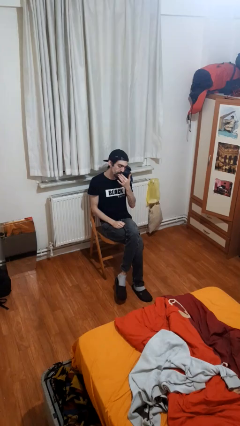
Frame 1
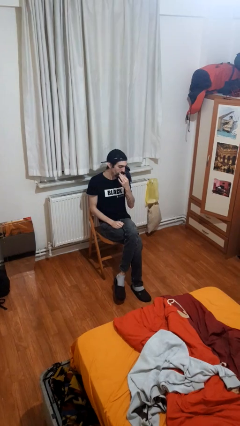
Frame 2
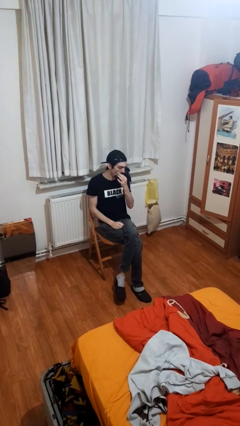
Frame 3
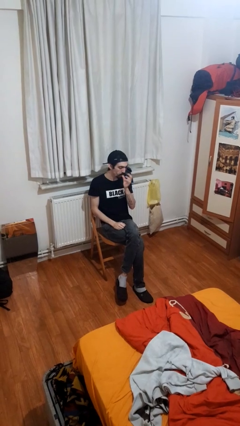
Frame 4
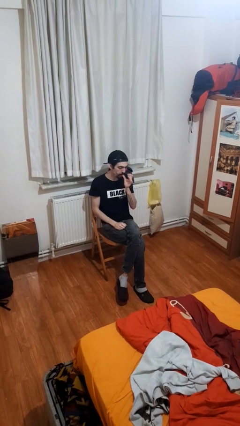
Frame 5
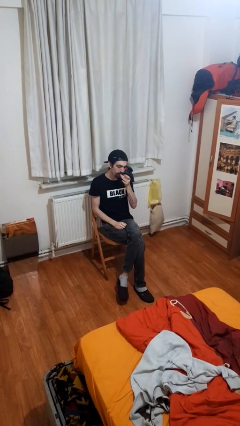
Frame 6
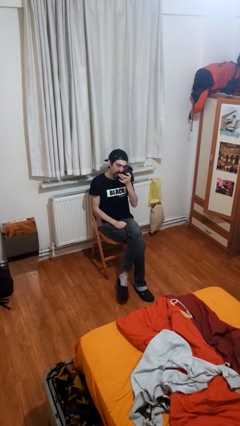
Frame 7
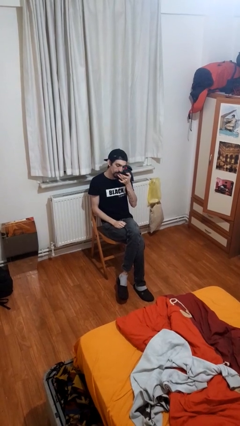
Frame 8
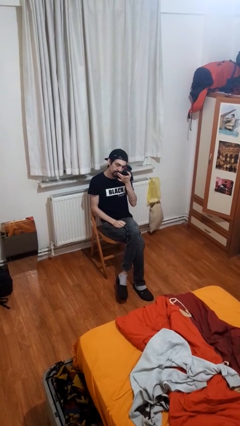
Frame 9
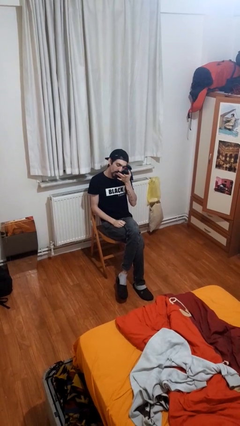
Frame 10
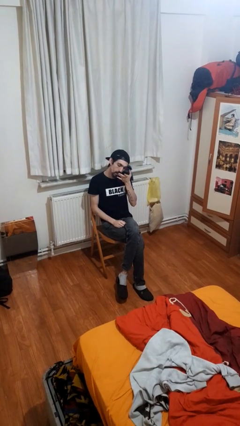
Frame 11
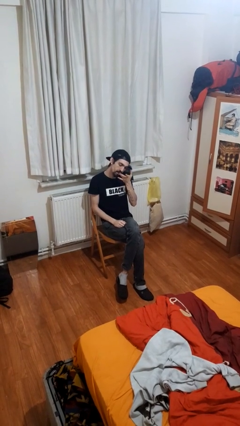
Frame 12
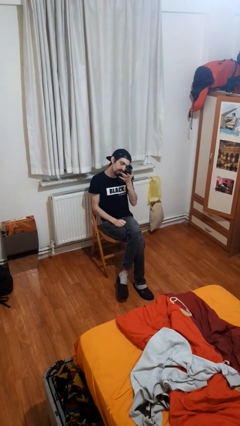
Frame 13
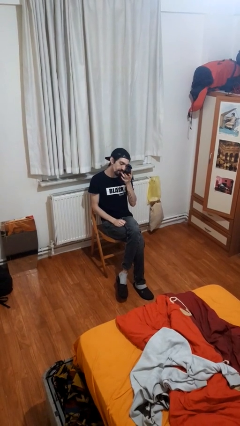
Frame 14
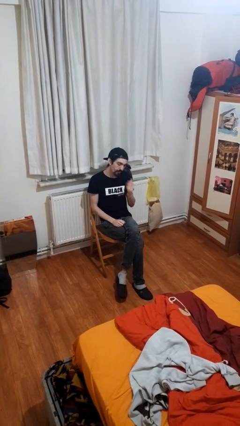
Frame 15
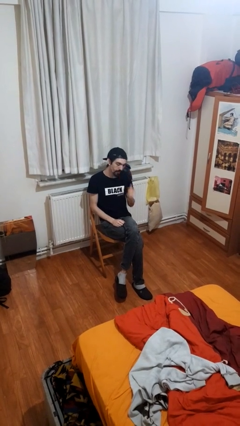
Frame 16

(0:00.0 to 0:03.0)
person licks fingers

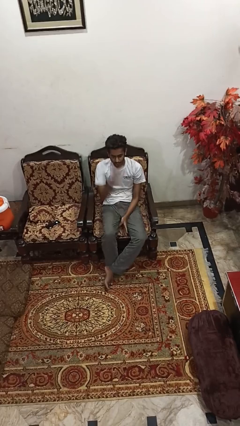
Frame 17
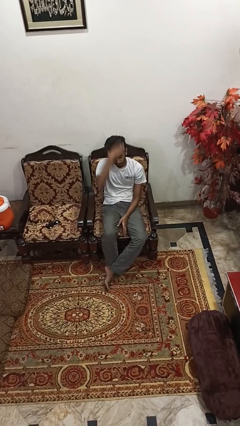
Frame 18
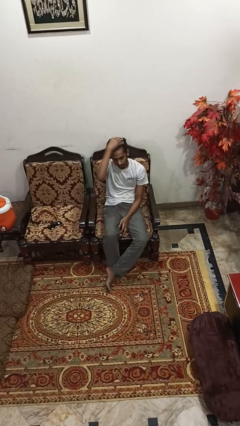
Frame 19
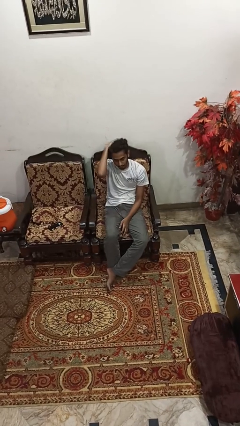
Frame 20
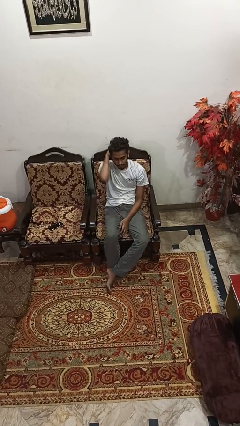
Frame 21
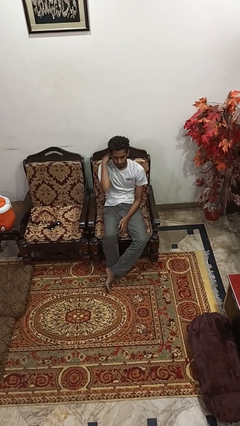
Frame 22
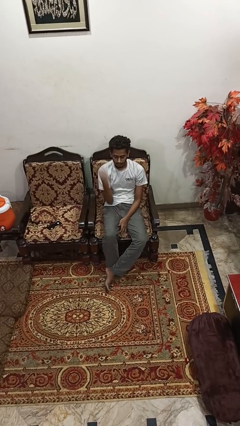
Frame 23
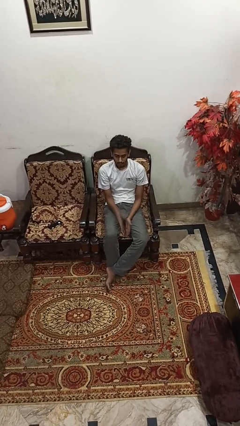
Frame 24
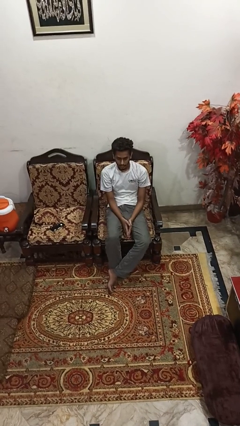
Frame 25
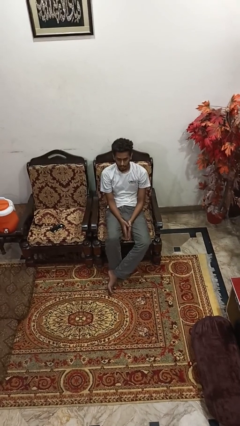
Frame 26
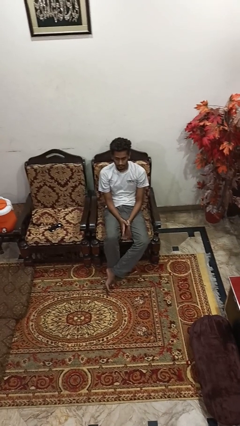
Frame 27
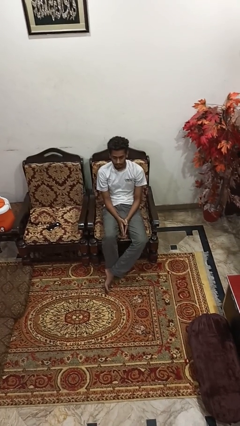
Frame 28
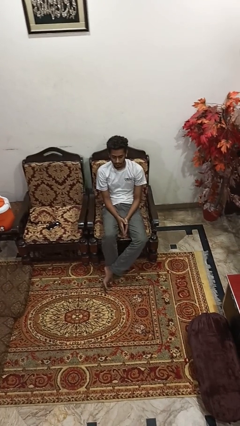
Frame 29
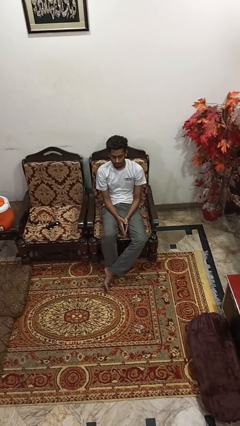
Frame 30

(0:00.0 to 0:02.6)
person strokes hair

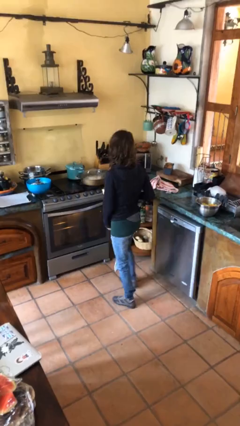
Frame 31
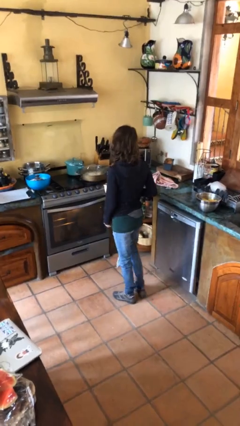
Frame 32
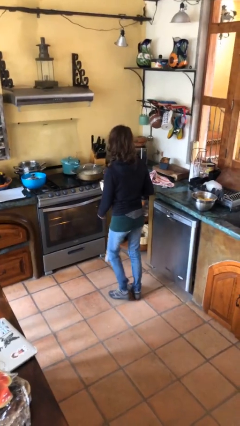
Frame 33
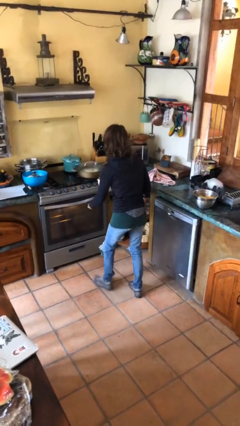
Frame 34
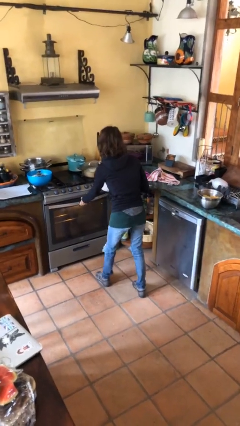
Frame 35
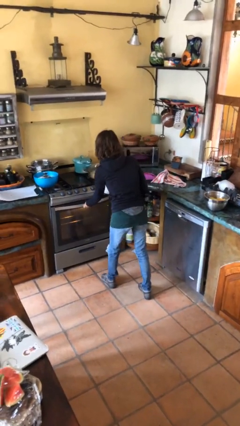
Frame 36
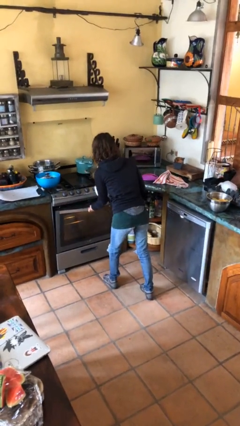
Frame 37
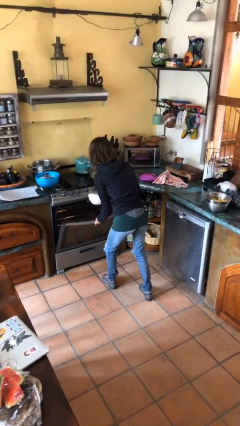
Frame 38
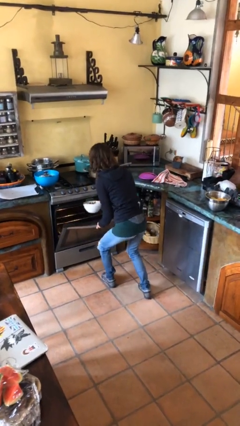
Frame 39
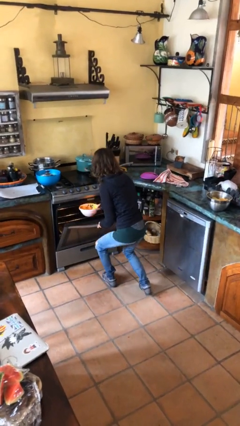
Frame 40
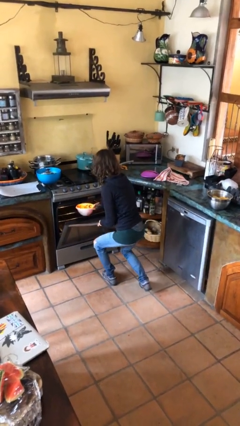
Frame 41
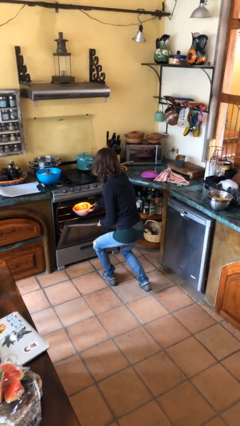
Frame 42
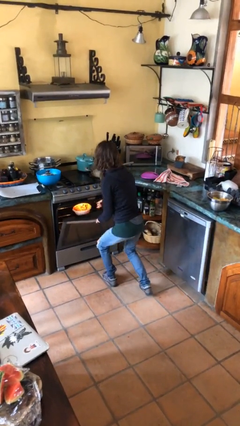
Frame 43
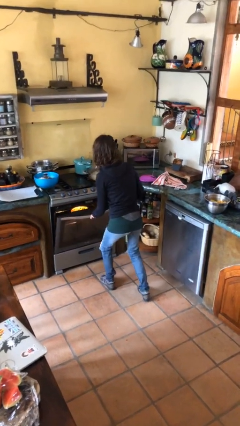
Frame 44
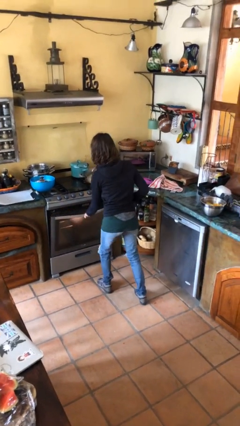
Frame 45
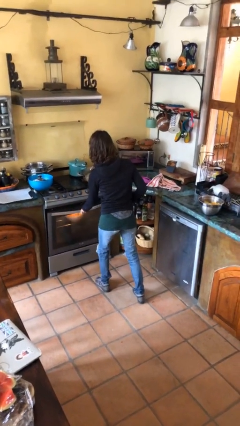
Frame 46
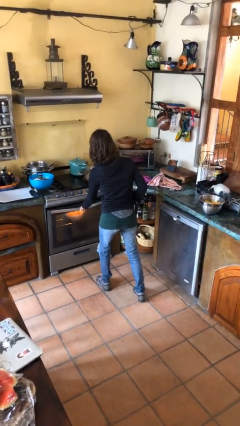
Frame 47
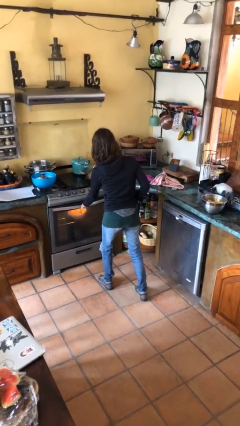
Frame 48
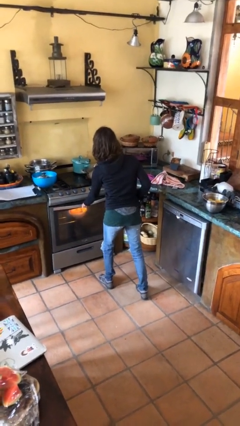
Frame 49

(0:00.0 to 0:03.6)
person puts object into oven

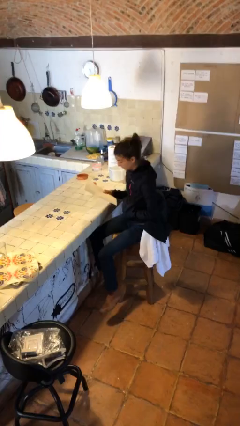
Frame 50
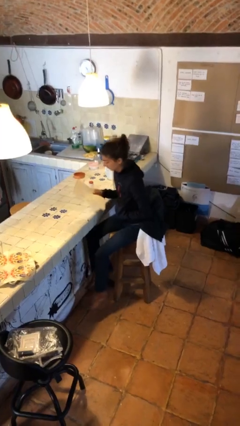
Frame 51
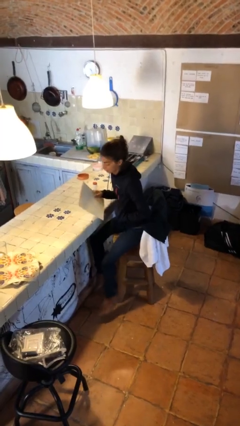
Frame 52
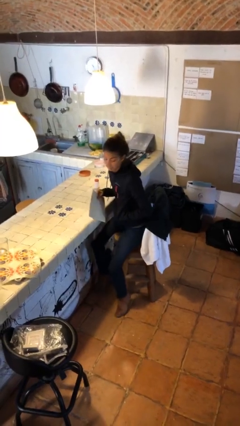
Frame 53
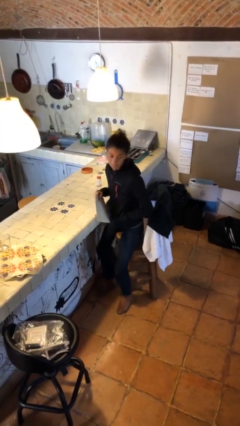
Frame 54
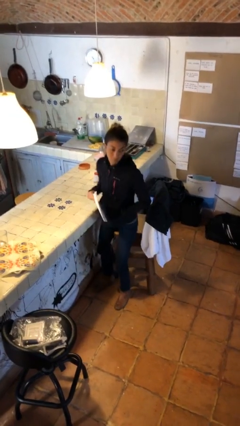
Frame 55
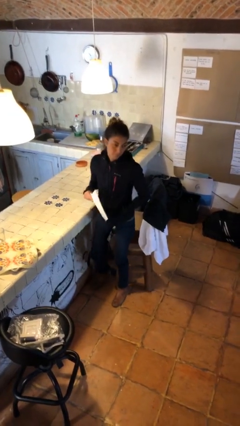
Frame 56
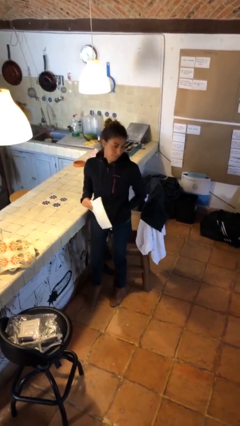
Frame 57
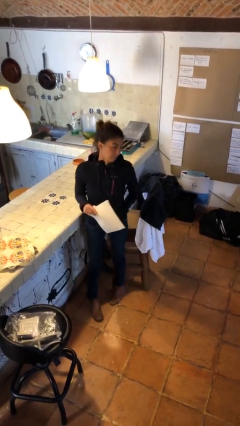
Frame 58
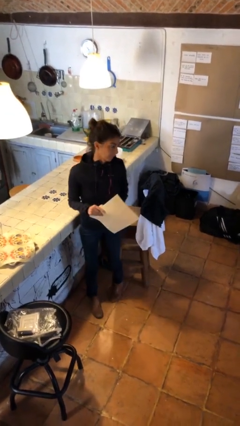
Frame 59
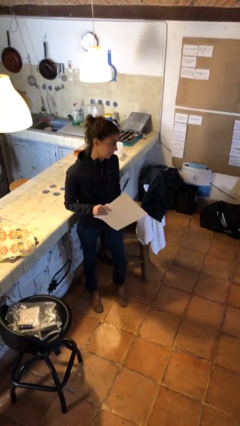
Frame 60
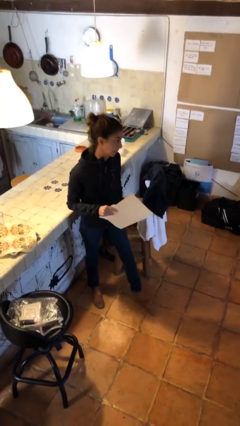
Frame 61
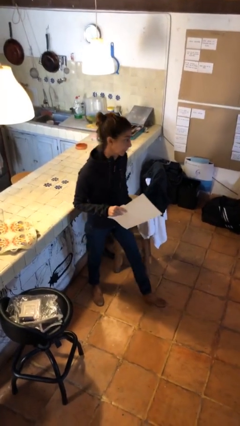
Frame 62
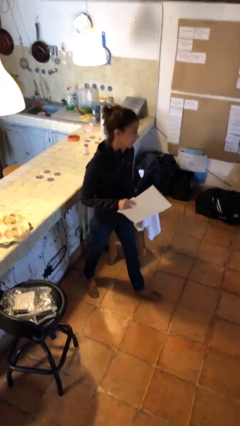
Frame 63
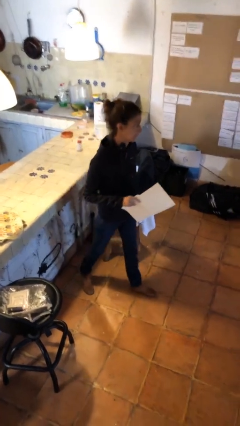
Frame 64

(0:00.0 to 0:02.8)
person stands up

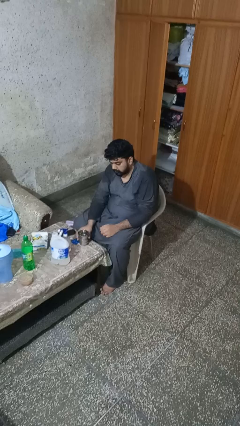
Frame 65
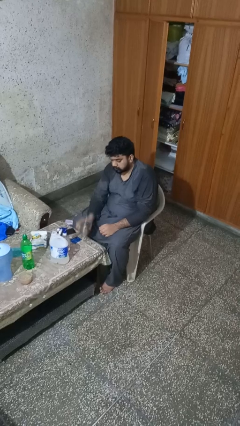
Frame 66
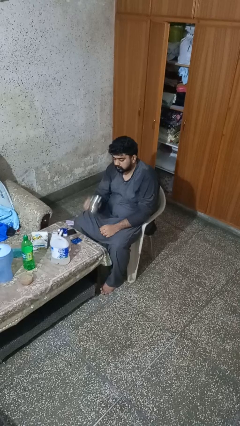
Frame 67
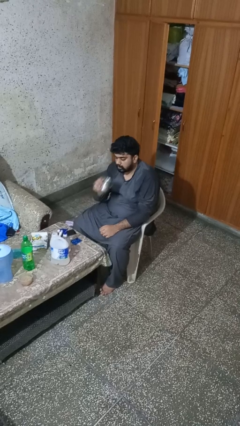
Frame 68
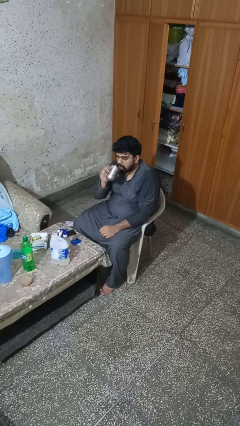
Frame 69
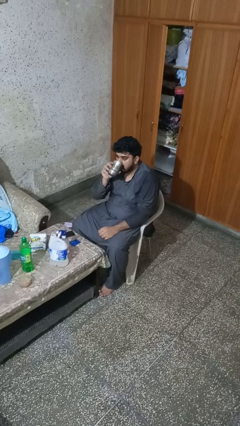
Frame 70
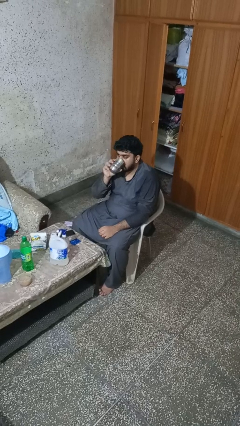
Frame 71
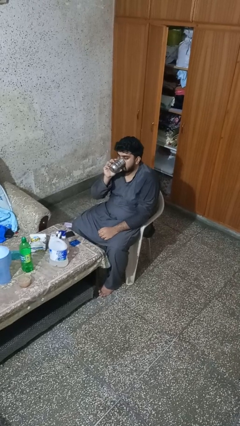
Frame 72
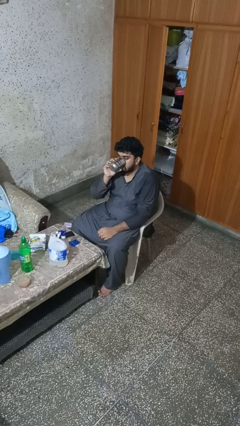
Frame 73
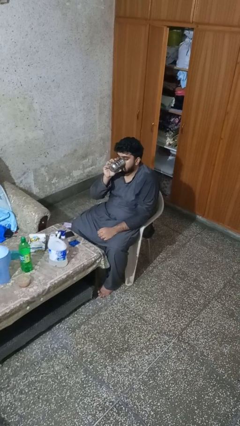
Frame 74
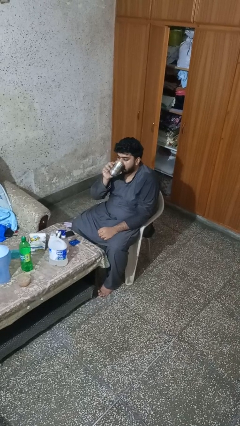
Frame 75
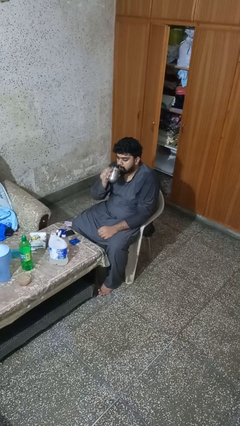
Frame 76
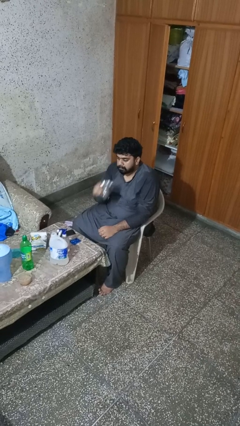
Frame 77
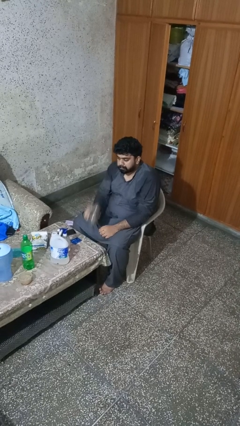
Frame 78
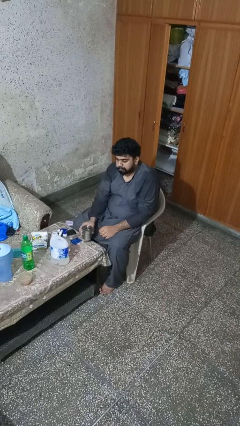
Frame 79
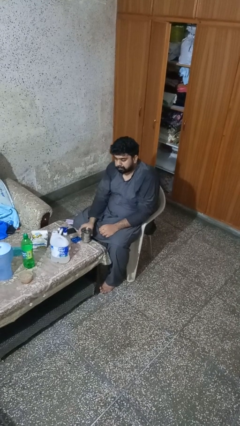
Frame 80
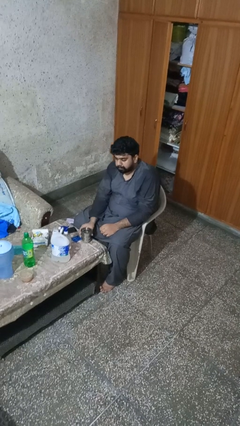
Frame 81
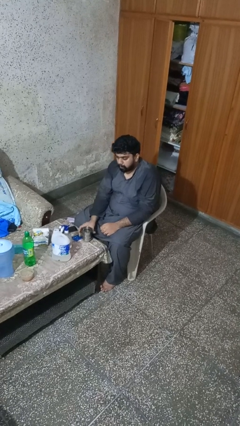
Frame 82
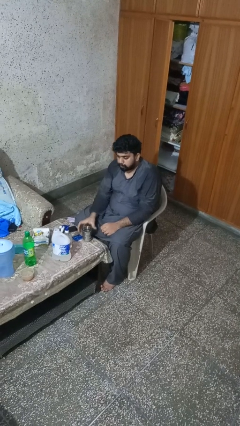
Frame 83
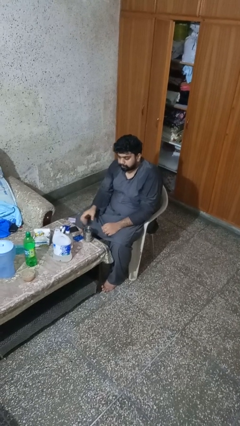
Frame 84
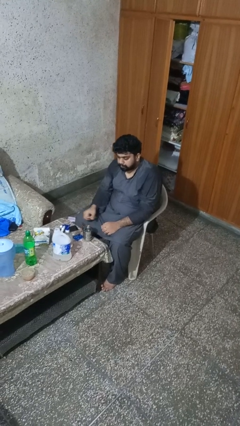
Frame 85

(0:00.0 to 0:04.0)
person drinks from cup

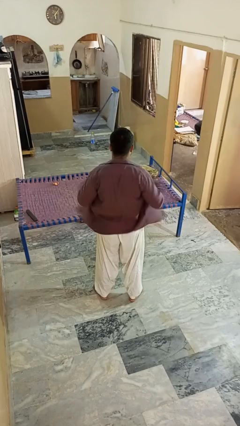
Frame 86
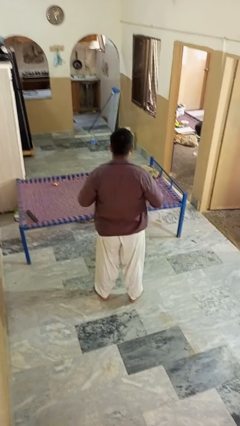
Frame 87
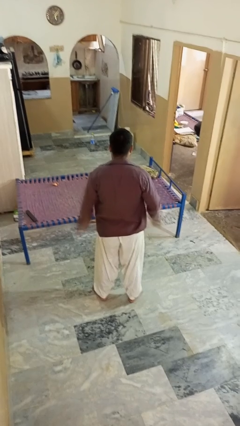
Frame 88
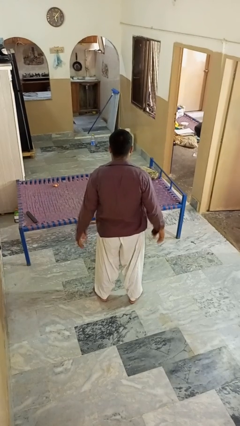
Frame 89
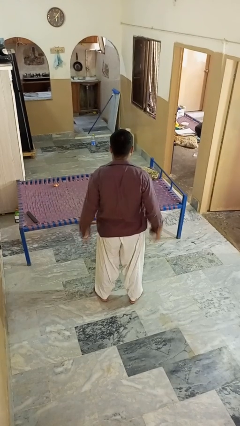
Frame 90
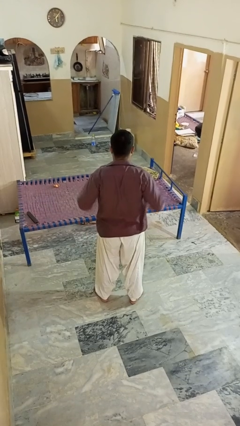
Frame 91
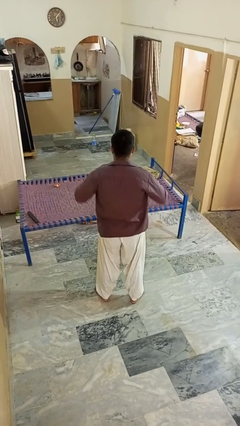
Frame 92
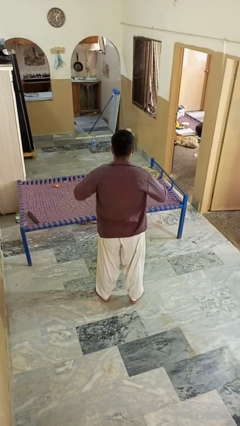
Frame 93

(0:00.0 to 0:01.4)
person buttons shirt
